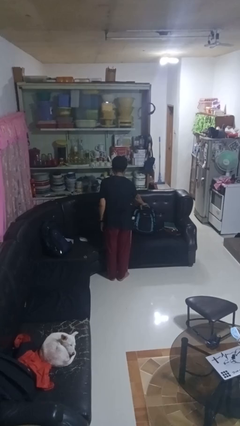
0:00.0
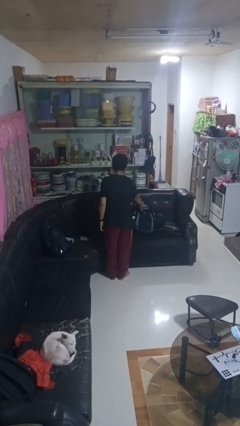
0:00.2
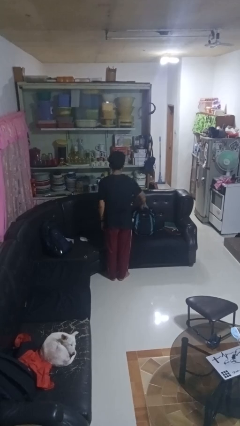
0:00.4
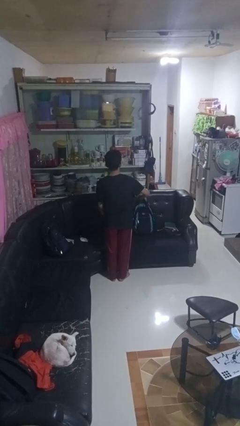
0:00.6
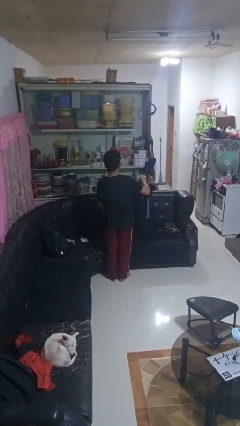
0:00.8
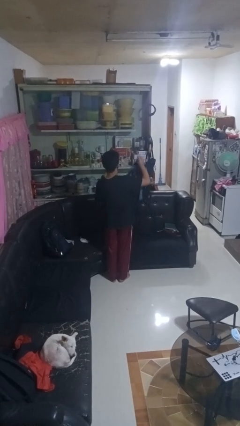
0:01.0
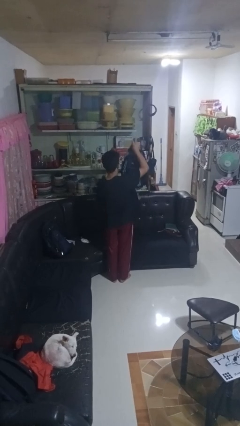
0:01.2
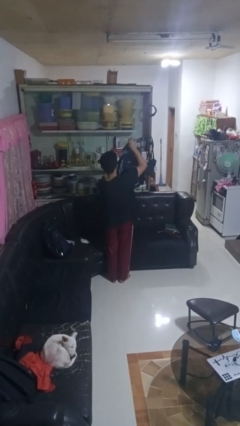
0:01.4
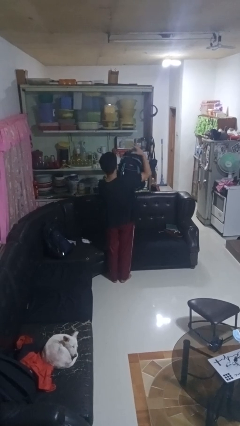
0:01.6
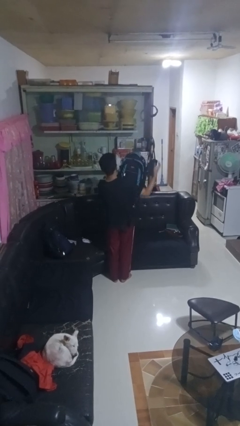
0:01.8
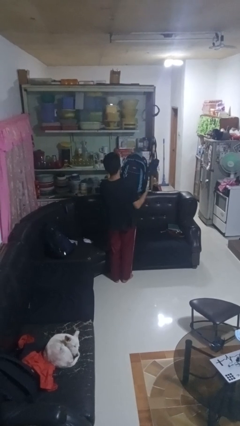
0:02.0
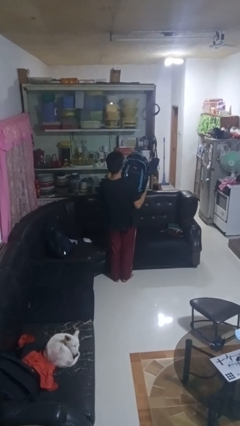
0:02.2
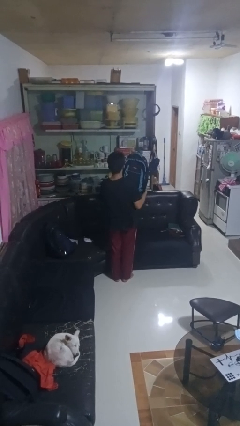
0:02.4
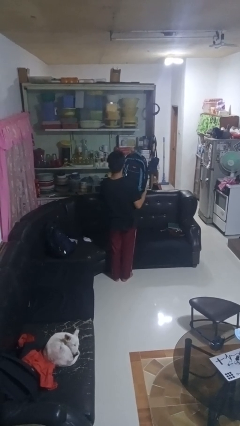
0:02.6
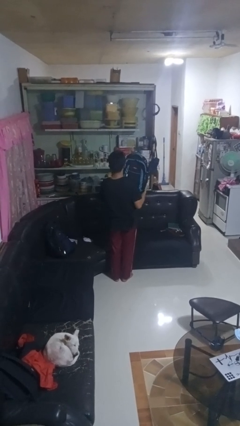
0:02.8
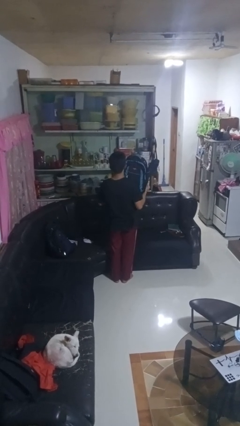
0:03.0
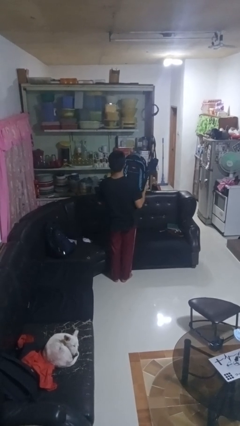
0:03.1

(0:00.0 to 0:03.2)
person picks up object from couch

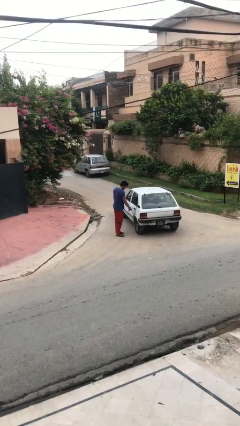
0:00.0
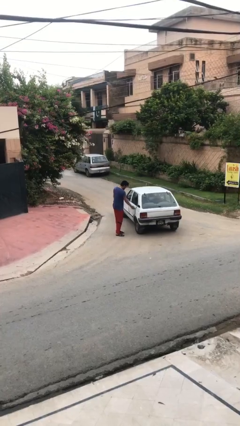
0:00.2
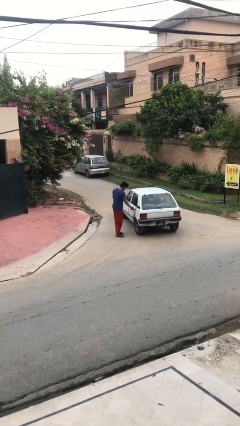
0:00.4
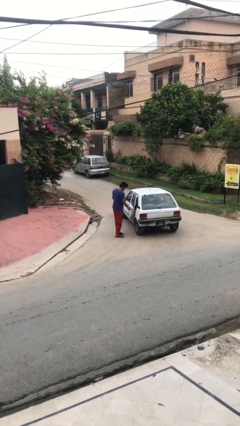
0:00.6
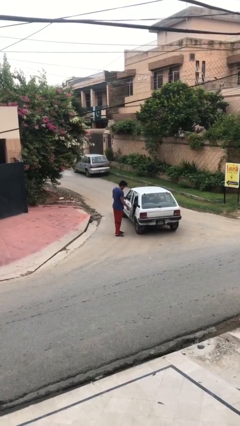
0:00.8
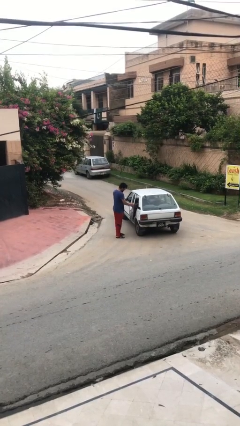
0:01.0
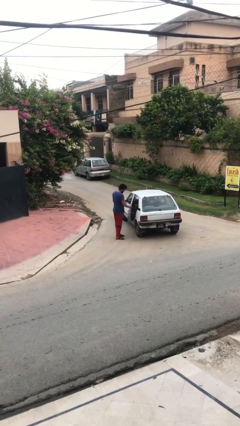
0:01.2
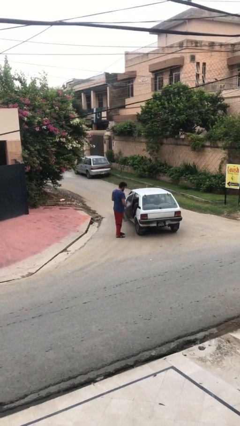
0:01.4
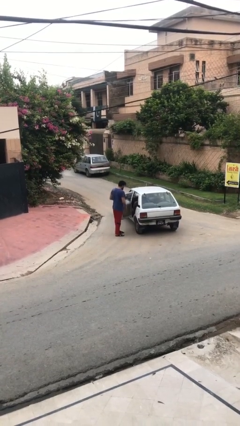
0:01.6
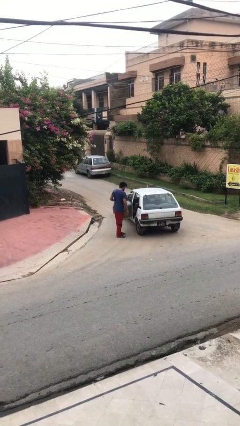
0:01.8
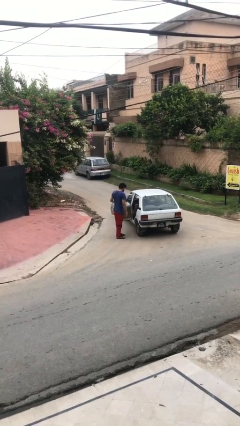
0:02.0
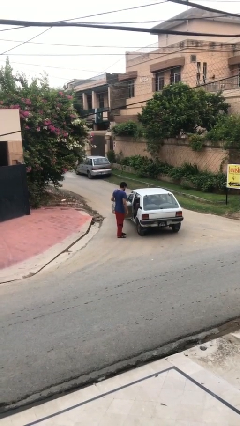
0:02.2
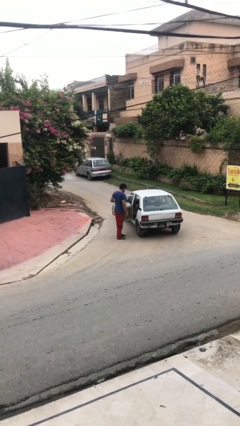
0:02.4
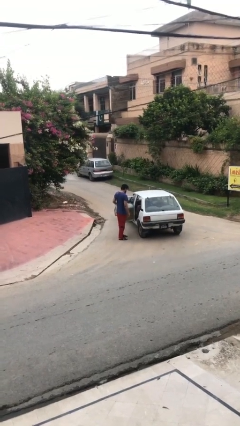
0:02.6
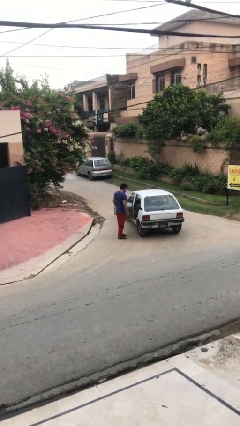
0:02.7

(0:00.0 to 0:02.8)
person opens car door

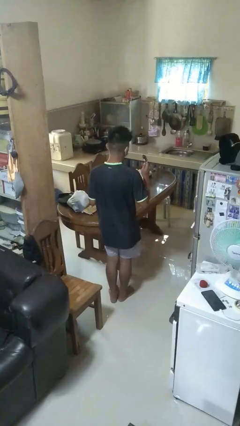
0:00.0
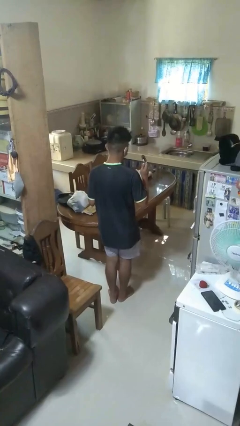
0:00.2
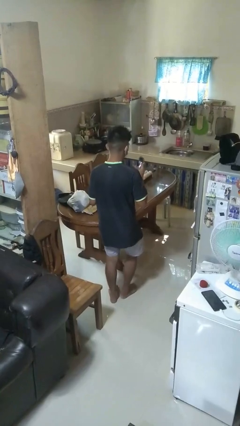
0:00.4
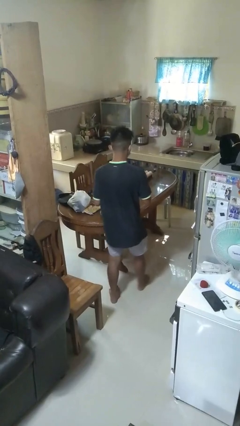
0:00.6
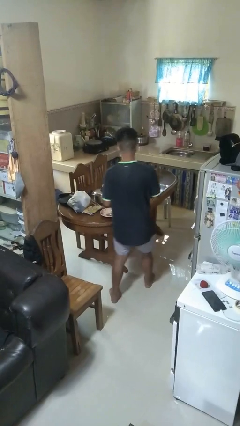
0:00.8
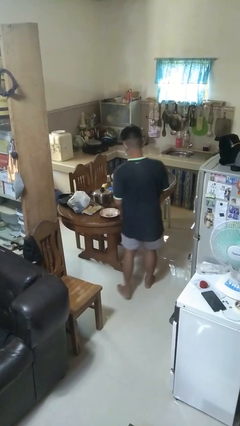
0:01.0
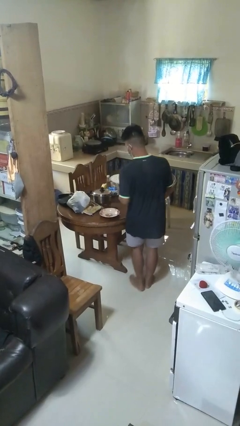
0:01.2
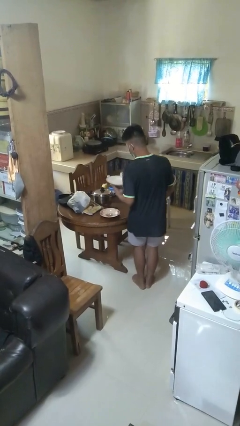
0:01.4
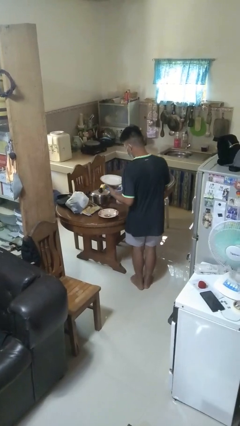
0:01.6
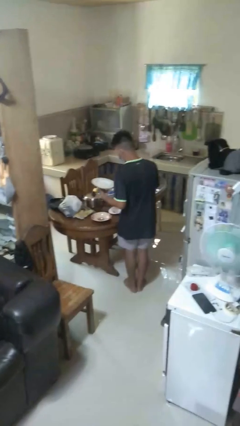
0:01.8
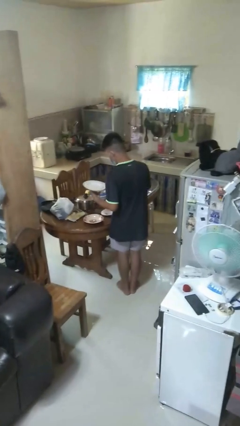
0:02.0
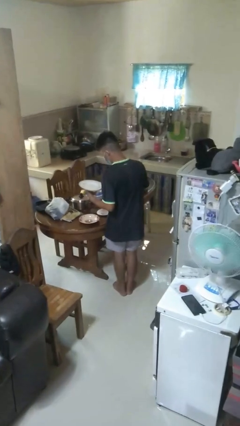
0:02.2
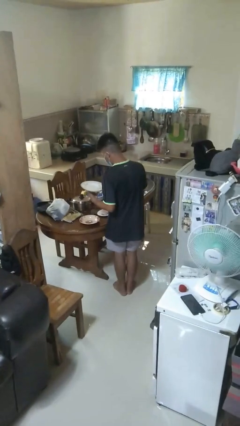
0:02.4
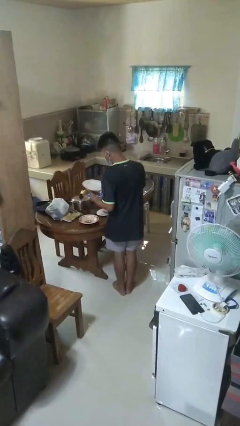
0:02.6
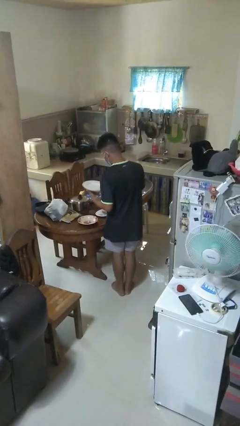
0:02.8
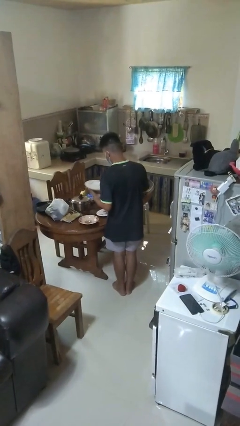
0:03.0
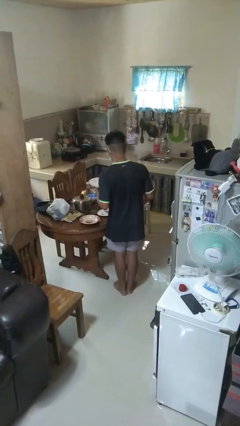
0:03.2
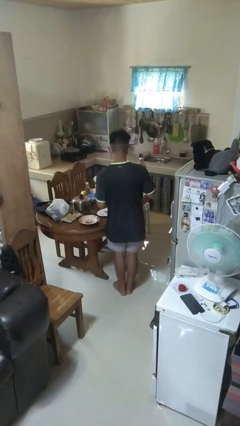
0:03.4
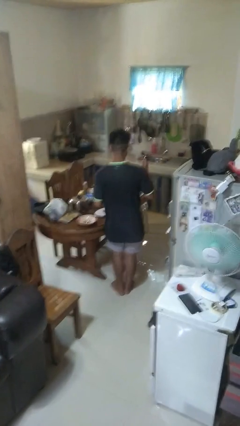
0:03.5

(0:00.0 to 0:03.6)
person sets table

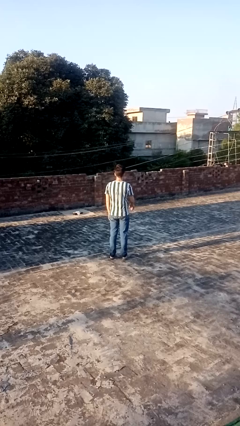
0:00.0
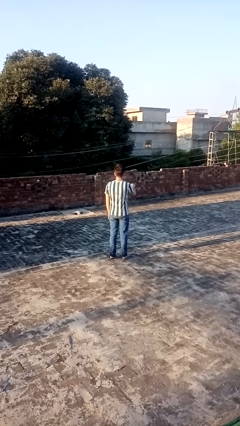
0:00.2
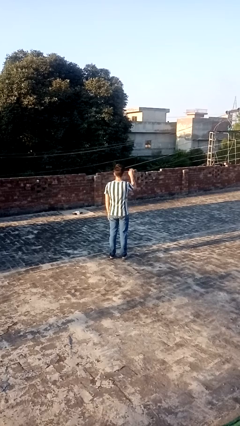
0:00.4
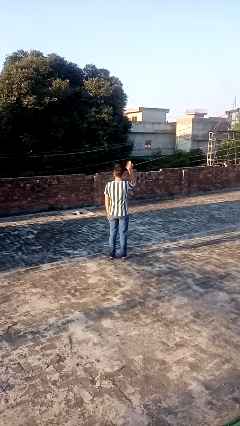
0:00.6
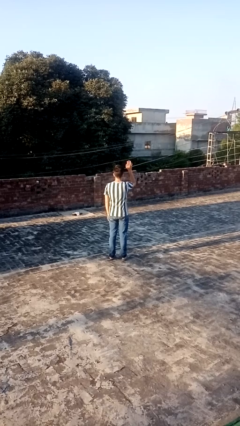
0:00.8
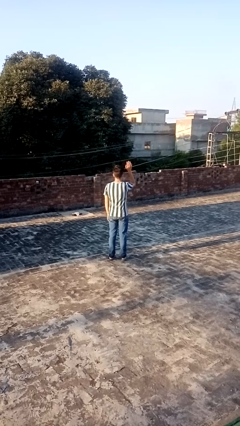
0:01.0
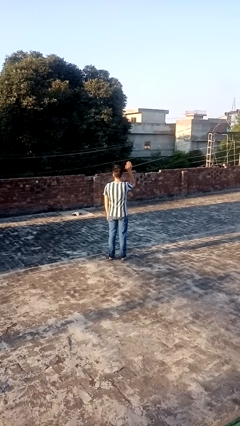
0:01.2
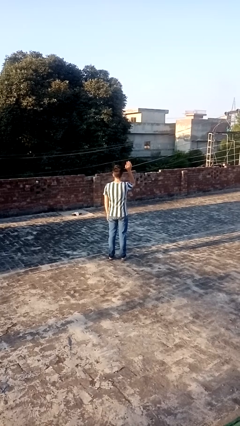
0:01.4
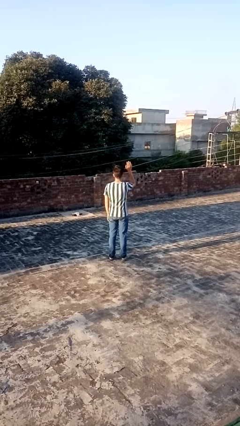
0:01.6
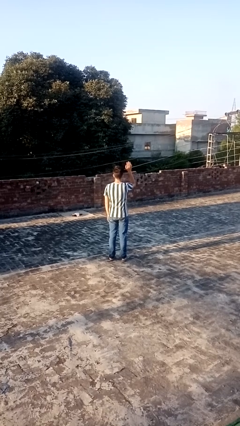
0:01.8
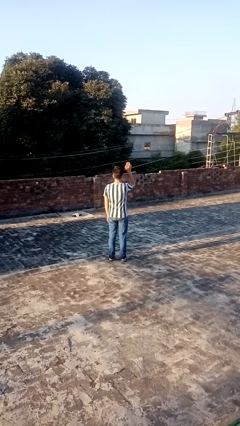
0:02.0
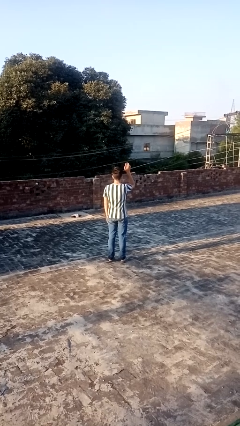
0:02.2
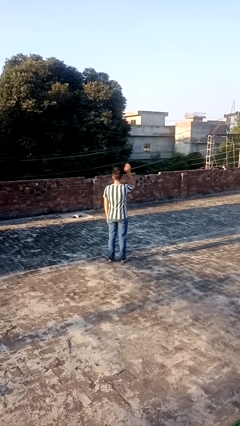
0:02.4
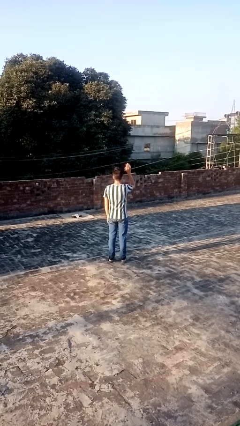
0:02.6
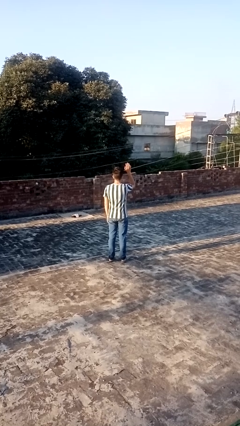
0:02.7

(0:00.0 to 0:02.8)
person gestures raise hand

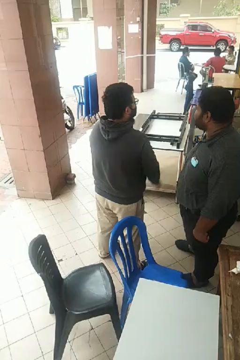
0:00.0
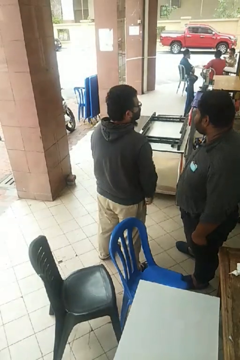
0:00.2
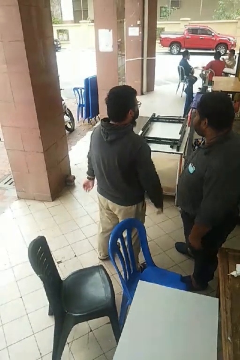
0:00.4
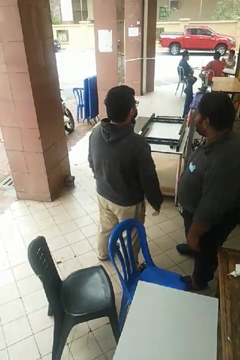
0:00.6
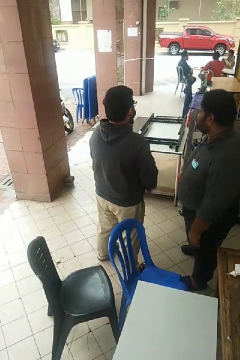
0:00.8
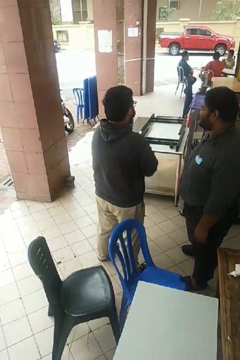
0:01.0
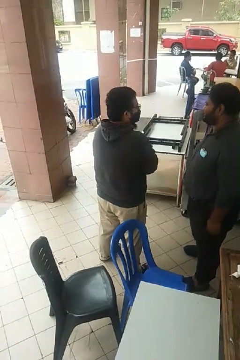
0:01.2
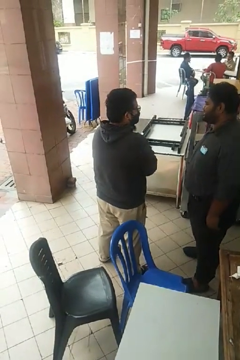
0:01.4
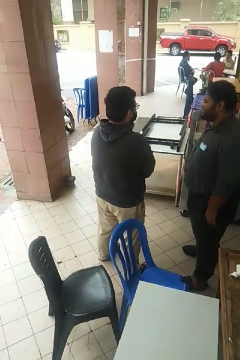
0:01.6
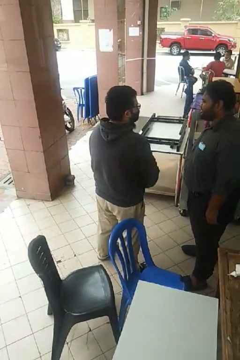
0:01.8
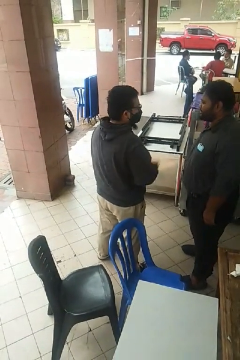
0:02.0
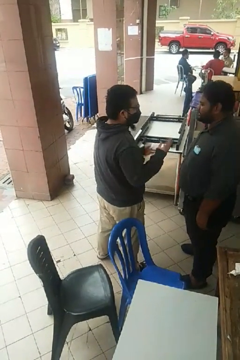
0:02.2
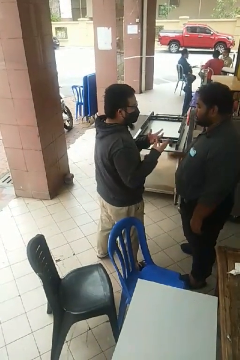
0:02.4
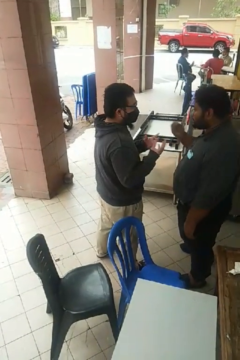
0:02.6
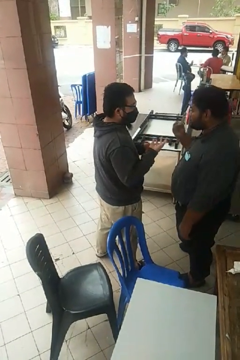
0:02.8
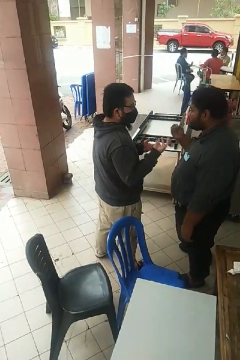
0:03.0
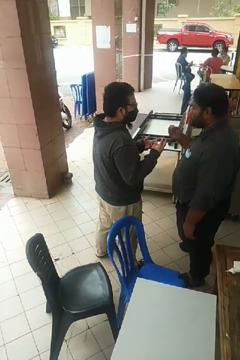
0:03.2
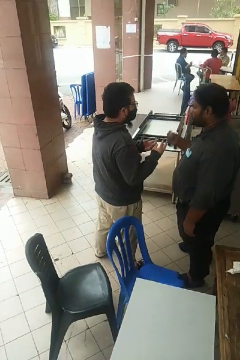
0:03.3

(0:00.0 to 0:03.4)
person talks to person

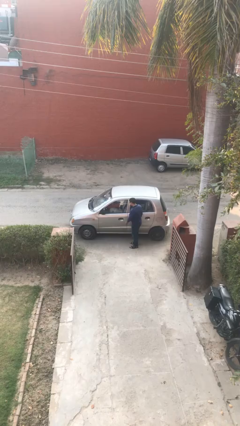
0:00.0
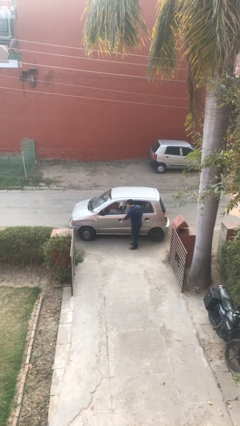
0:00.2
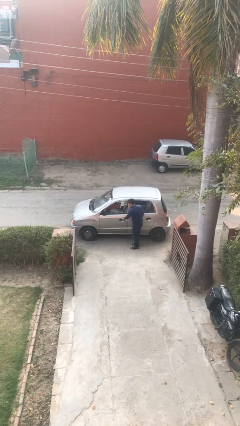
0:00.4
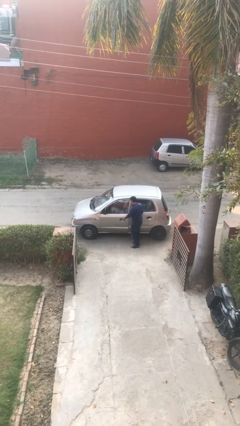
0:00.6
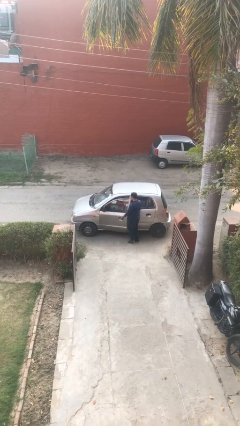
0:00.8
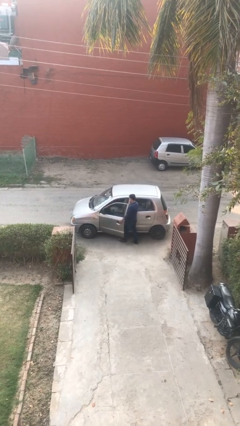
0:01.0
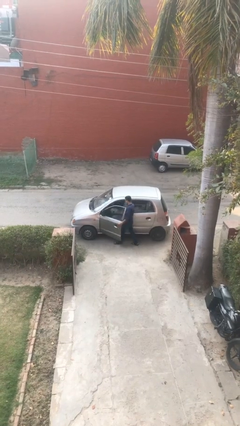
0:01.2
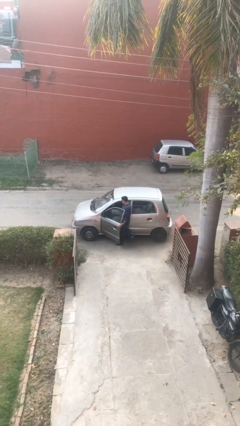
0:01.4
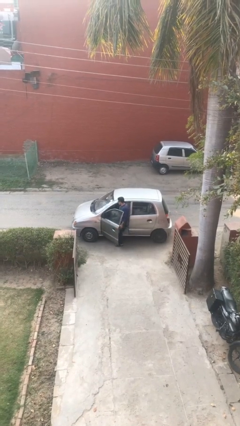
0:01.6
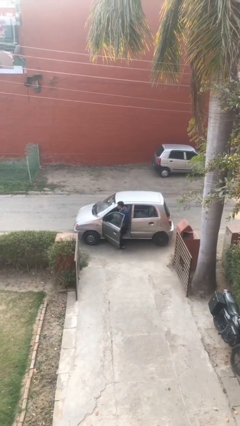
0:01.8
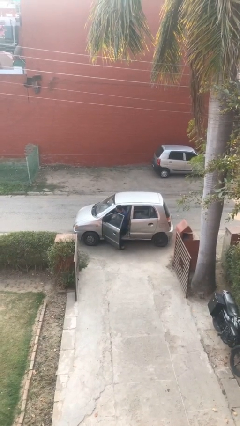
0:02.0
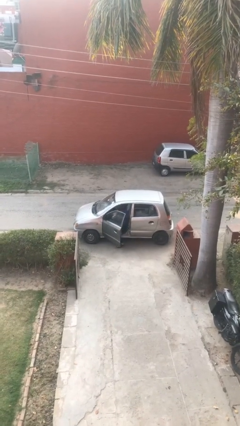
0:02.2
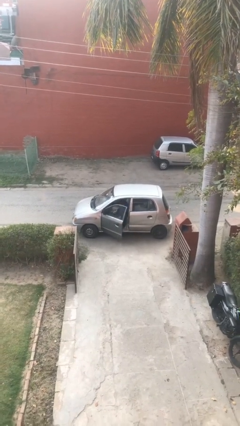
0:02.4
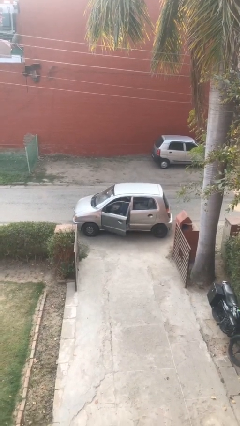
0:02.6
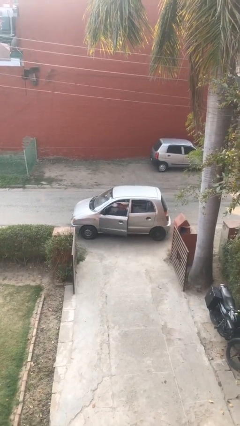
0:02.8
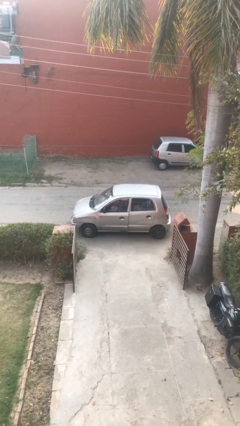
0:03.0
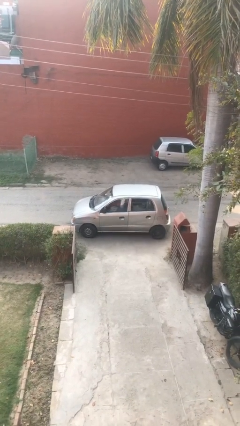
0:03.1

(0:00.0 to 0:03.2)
car picks up person
